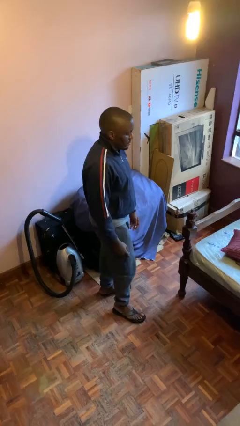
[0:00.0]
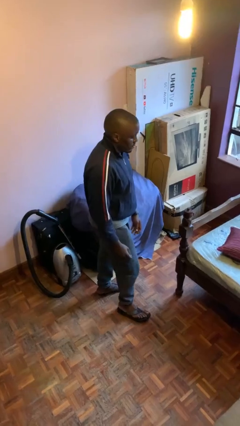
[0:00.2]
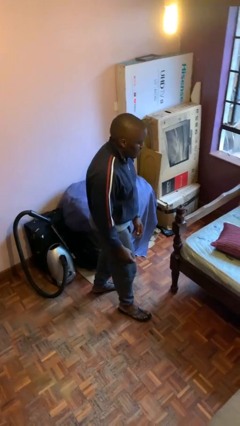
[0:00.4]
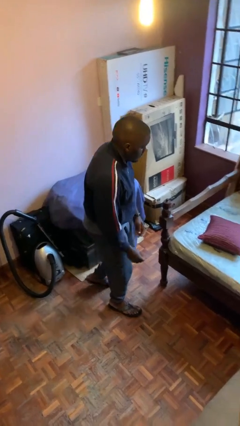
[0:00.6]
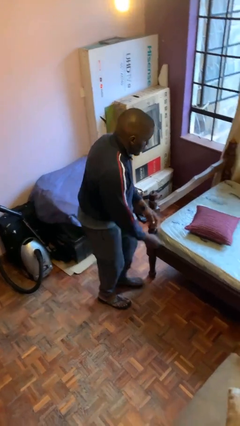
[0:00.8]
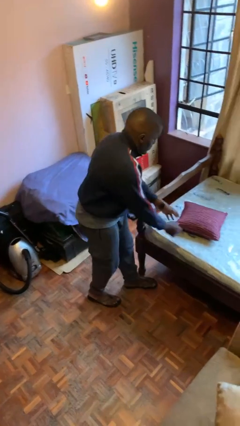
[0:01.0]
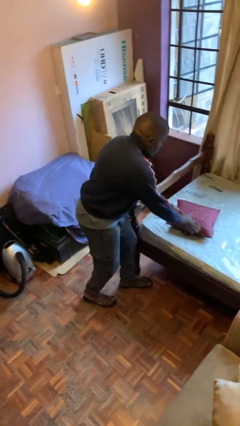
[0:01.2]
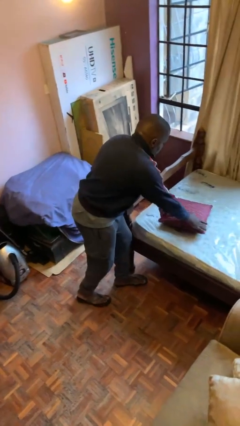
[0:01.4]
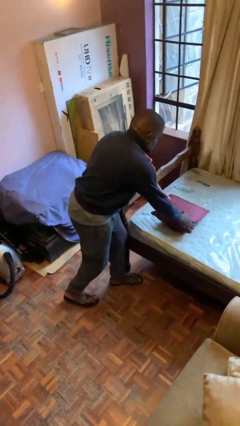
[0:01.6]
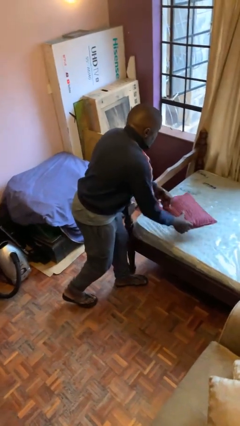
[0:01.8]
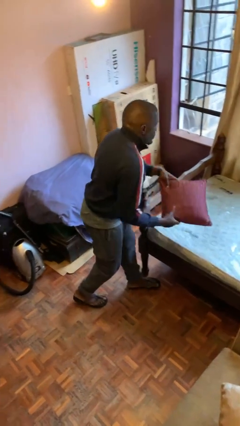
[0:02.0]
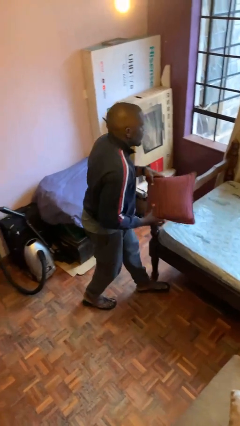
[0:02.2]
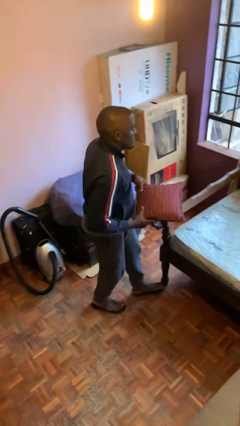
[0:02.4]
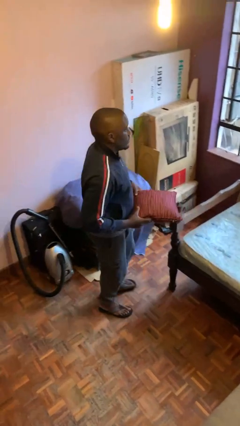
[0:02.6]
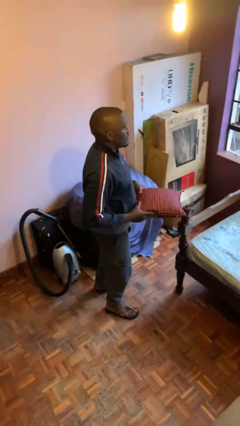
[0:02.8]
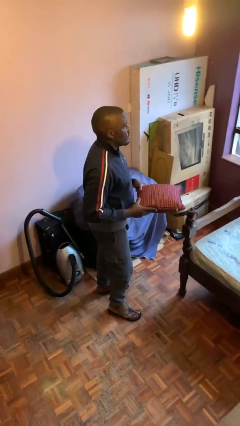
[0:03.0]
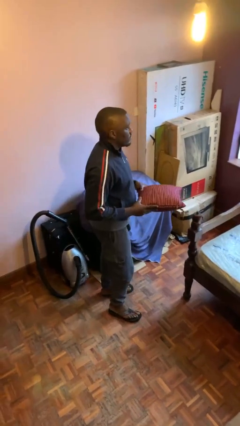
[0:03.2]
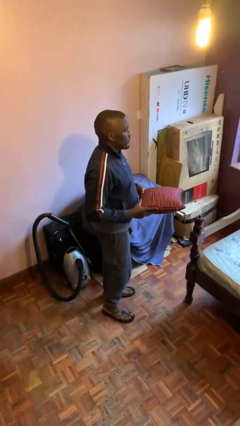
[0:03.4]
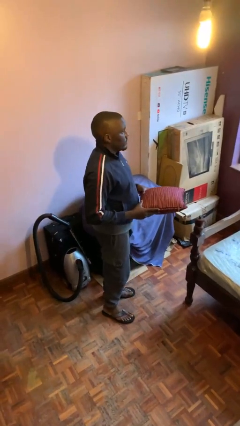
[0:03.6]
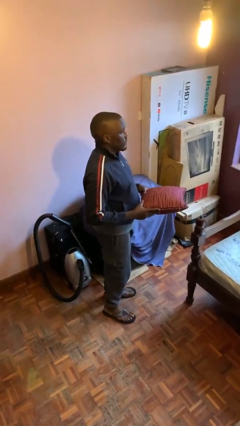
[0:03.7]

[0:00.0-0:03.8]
person picks up object from bed

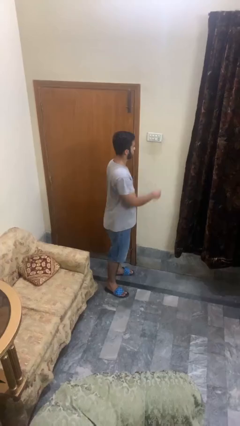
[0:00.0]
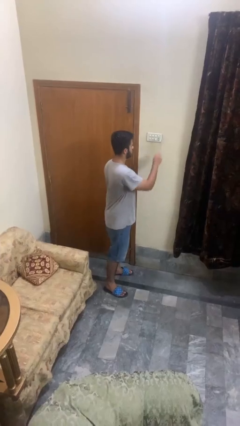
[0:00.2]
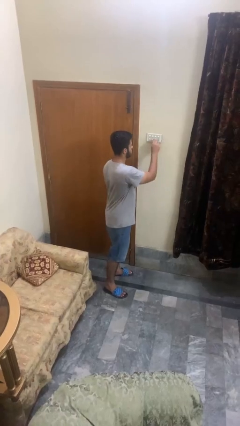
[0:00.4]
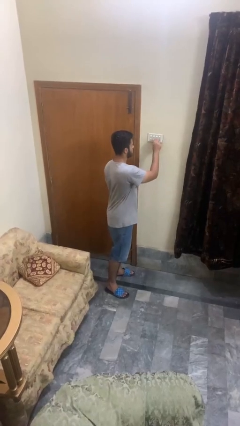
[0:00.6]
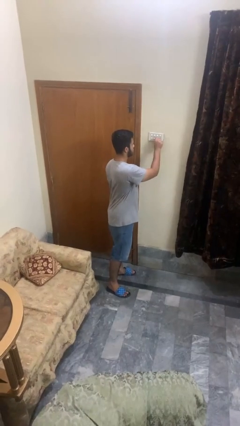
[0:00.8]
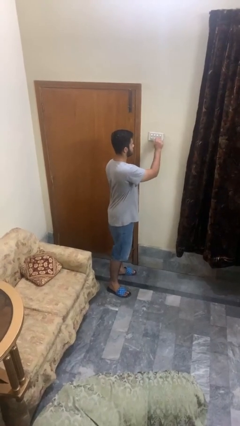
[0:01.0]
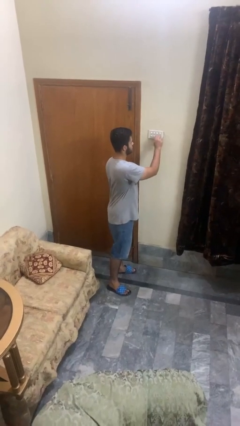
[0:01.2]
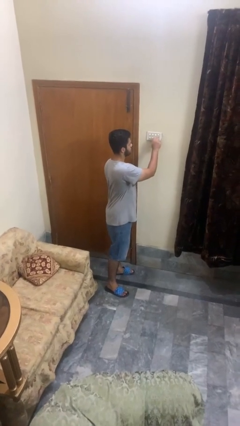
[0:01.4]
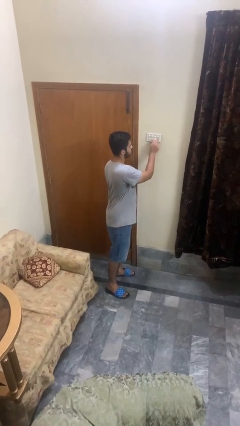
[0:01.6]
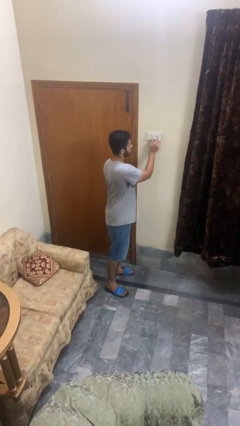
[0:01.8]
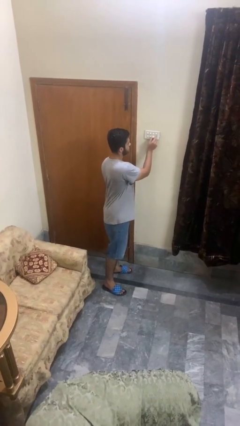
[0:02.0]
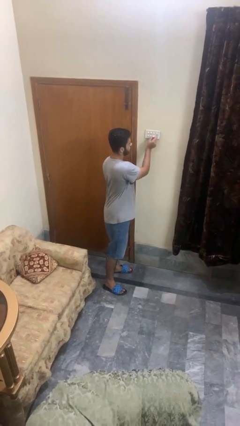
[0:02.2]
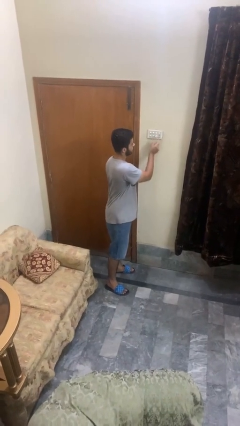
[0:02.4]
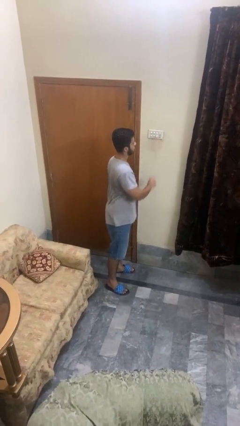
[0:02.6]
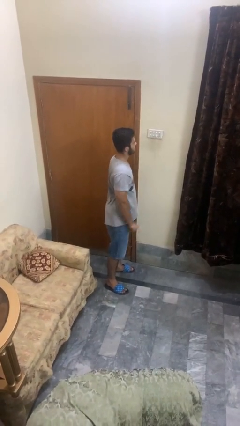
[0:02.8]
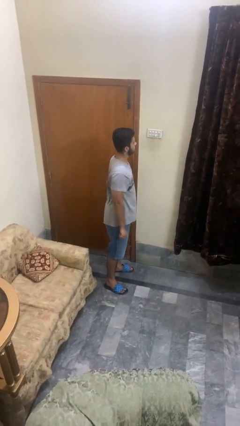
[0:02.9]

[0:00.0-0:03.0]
person adjusts thermostat

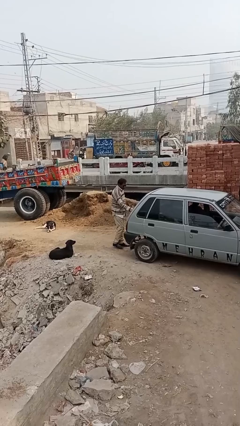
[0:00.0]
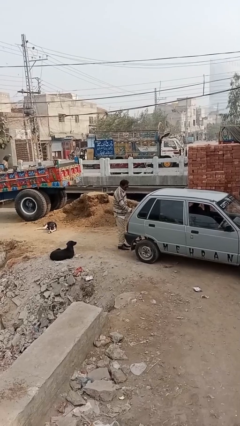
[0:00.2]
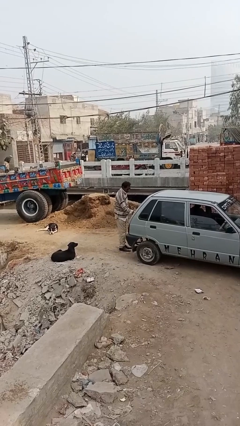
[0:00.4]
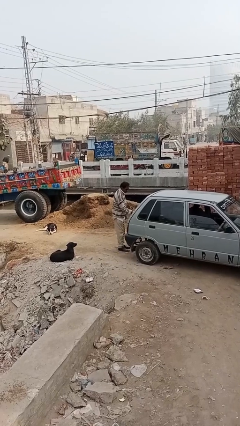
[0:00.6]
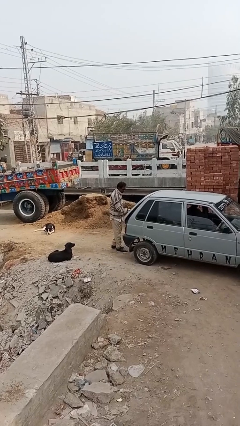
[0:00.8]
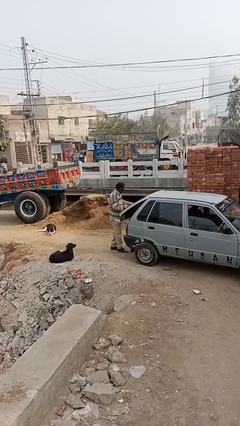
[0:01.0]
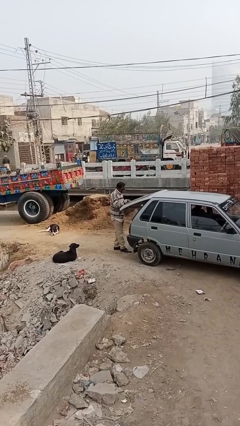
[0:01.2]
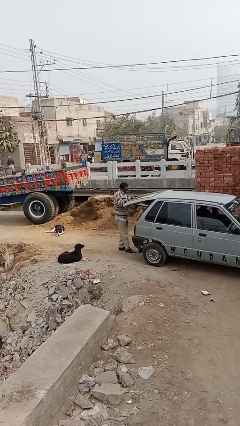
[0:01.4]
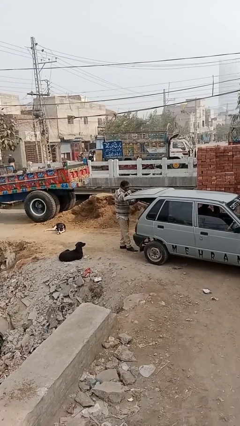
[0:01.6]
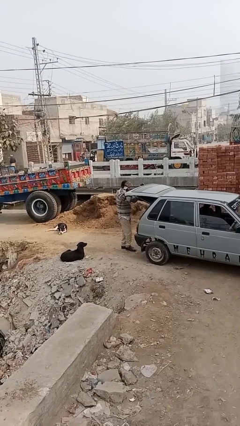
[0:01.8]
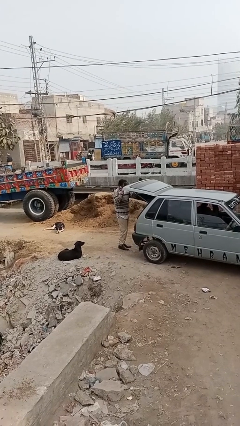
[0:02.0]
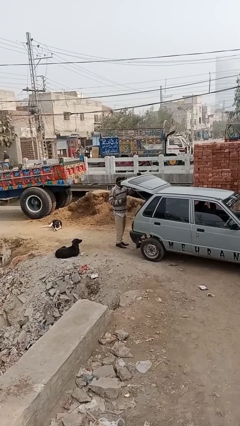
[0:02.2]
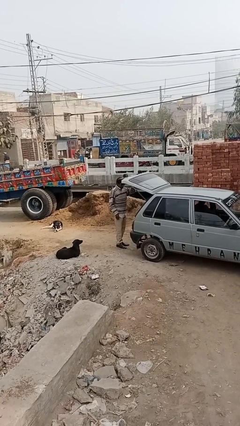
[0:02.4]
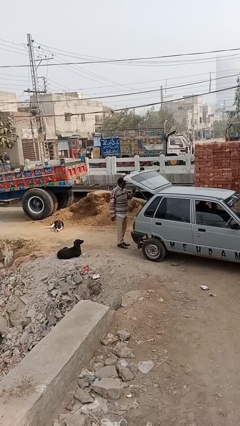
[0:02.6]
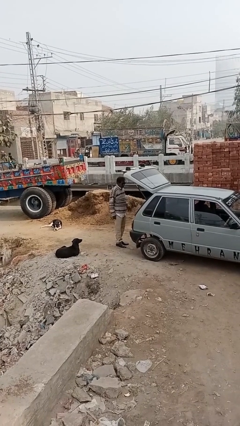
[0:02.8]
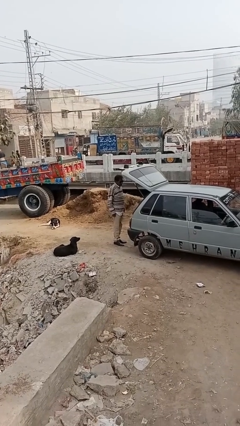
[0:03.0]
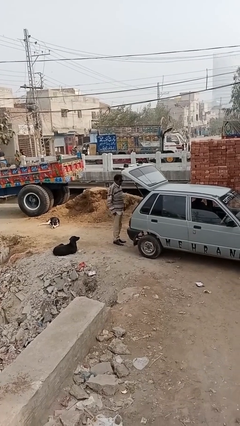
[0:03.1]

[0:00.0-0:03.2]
person opens car trunk

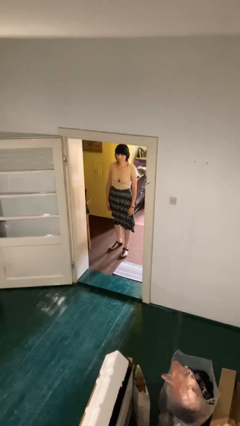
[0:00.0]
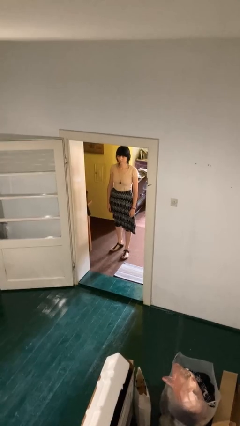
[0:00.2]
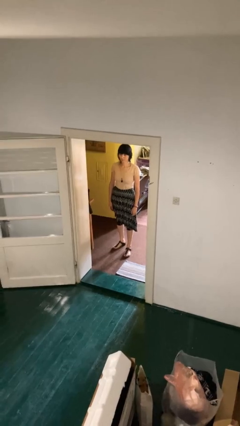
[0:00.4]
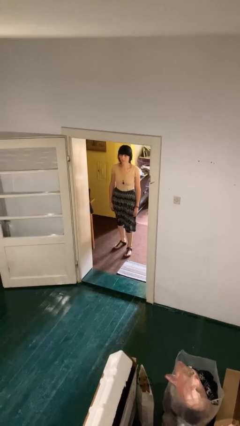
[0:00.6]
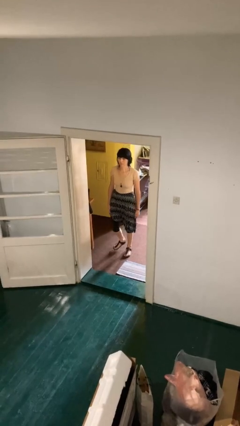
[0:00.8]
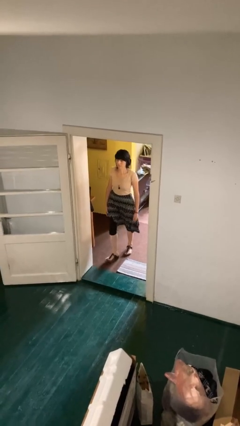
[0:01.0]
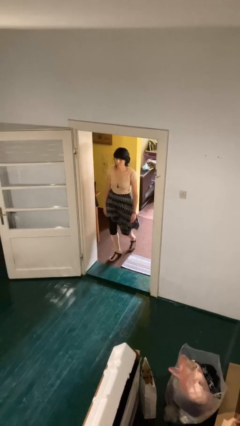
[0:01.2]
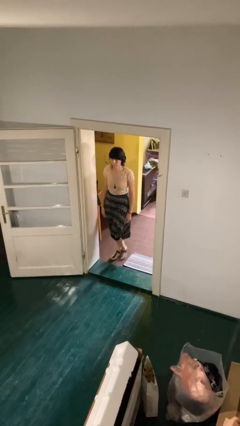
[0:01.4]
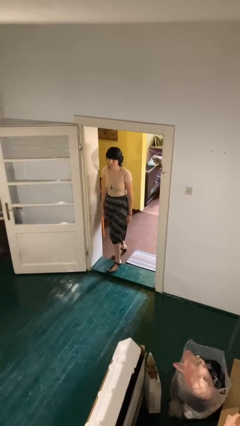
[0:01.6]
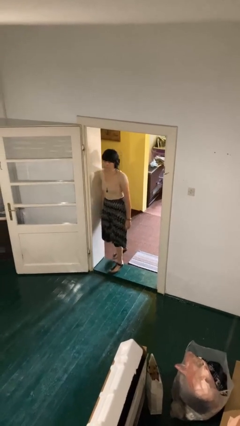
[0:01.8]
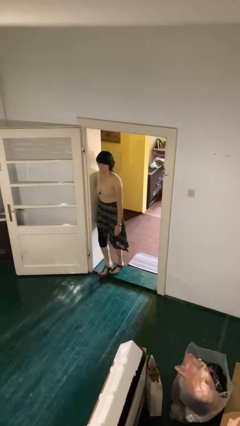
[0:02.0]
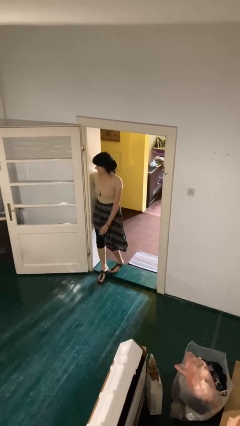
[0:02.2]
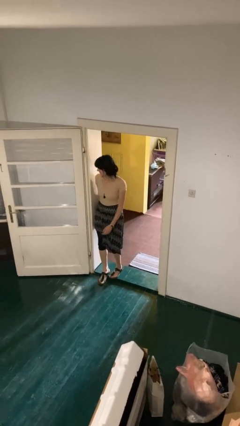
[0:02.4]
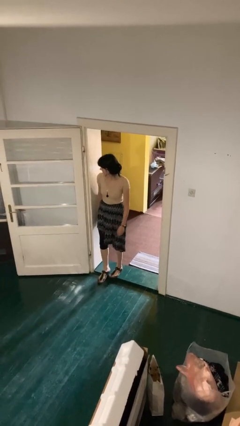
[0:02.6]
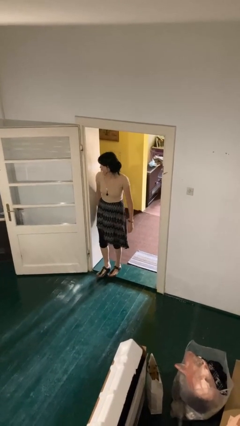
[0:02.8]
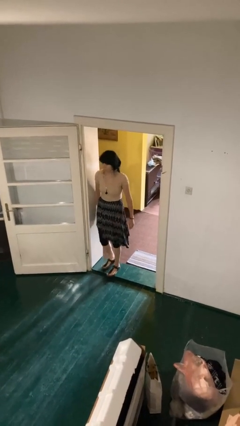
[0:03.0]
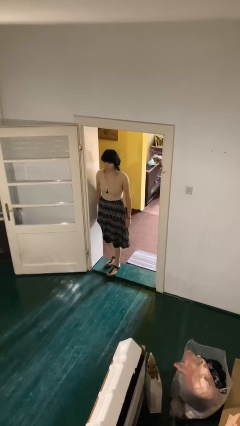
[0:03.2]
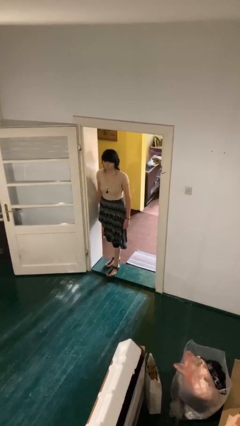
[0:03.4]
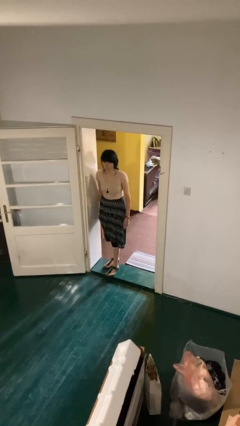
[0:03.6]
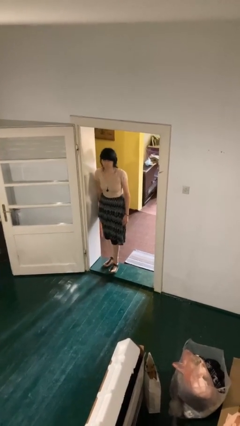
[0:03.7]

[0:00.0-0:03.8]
person bumps into wall

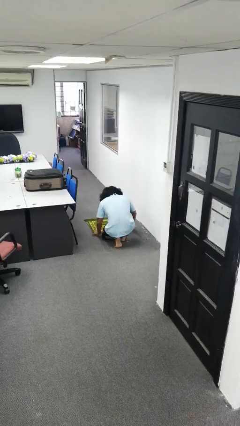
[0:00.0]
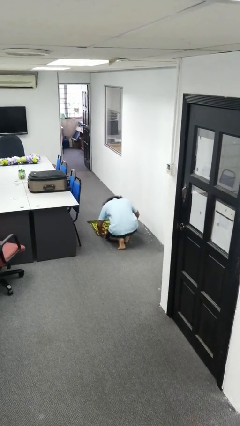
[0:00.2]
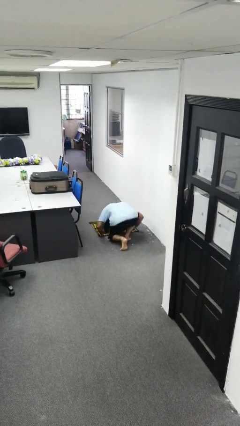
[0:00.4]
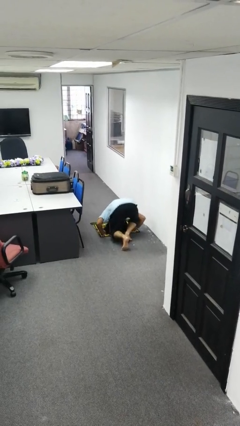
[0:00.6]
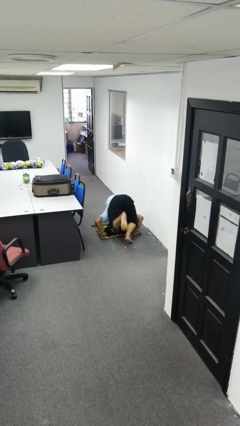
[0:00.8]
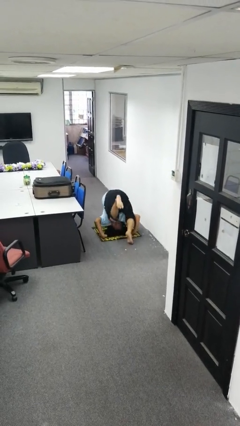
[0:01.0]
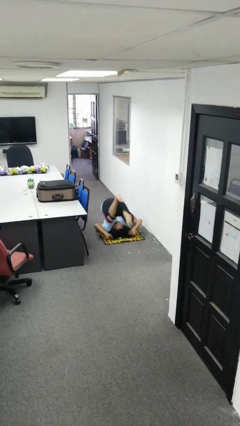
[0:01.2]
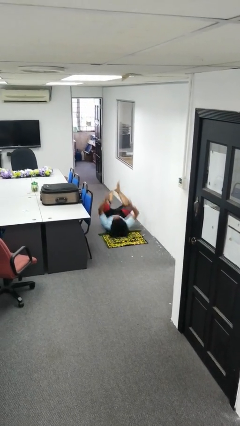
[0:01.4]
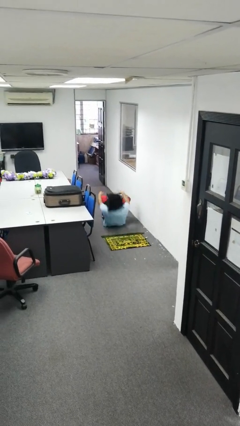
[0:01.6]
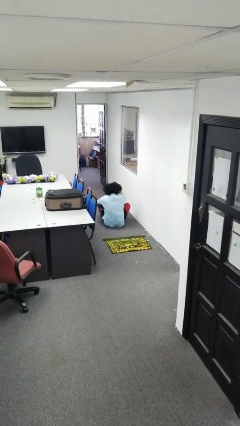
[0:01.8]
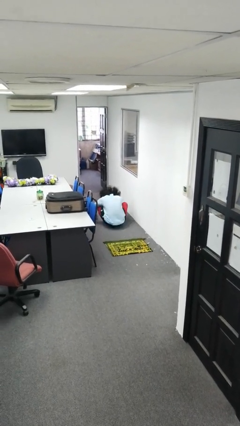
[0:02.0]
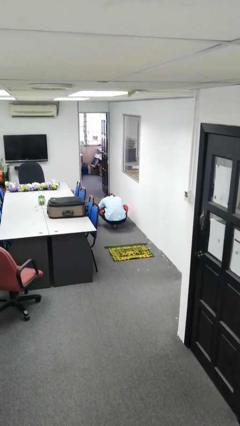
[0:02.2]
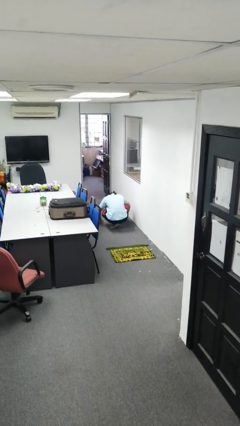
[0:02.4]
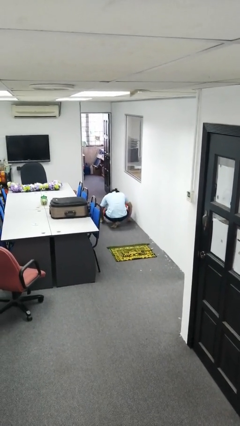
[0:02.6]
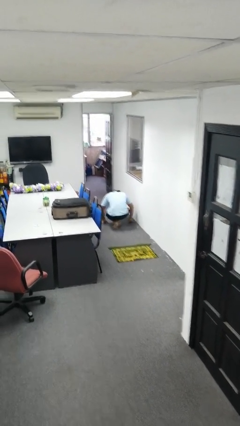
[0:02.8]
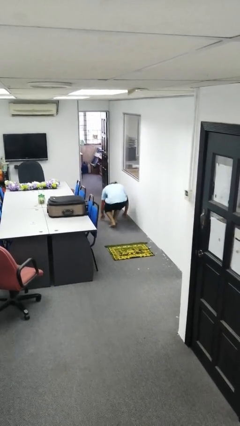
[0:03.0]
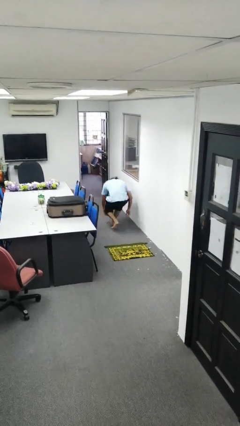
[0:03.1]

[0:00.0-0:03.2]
person somersaults

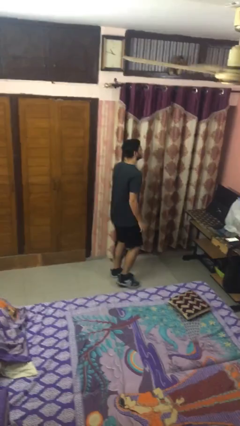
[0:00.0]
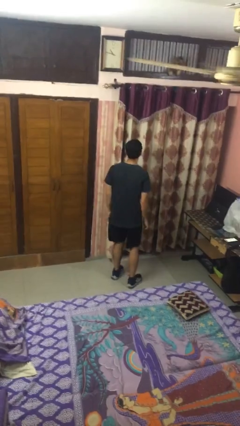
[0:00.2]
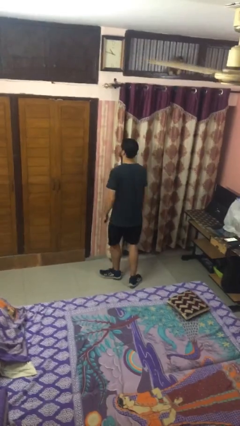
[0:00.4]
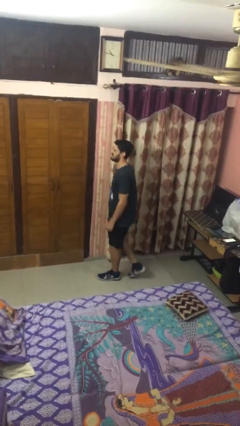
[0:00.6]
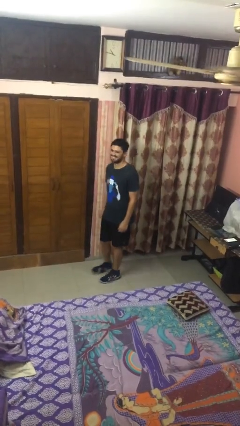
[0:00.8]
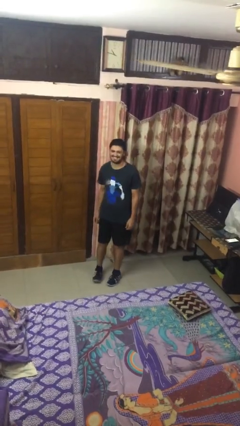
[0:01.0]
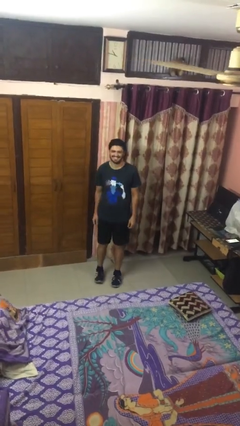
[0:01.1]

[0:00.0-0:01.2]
person twirls
